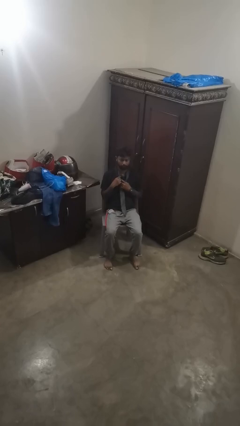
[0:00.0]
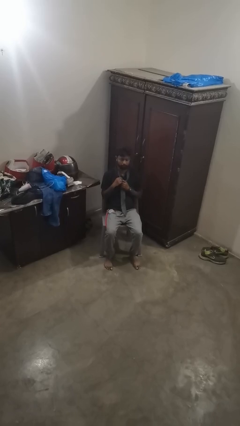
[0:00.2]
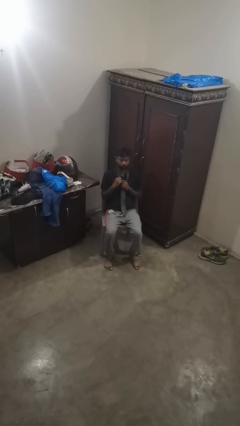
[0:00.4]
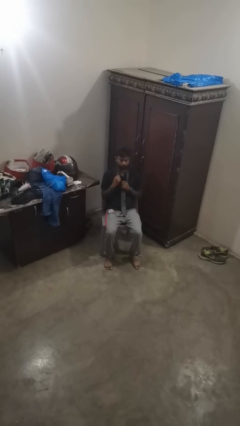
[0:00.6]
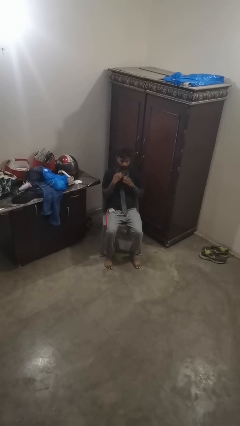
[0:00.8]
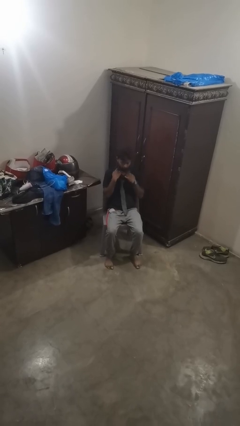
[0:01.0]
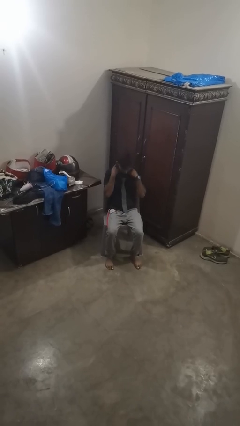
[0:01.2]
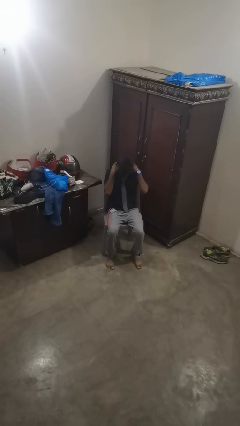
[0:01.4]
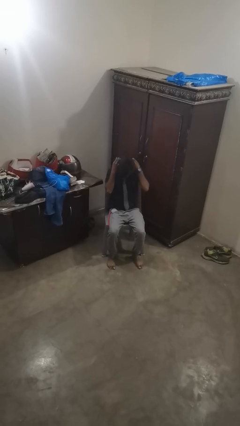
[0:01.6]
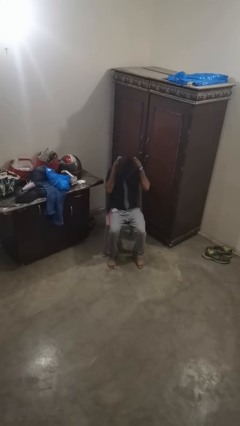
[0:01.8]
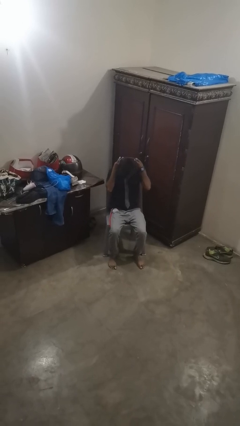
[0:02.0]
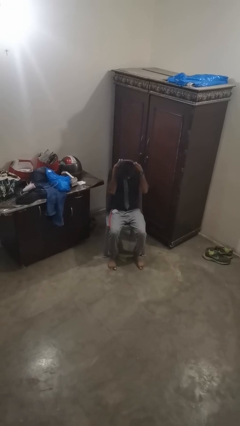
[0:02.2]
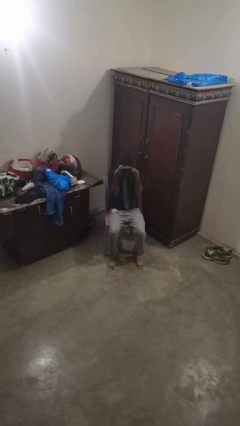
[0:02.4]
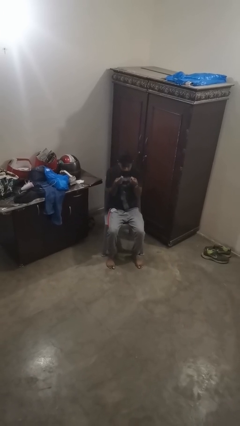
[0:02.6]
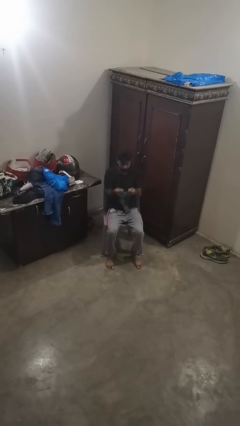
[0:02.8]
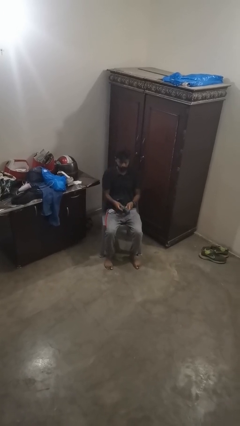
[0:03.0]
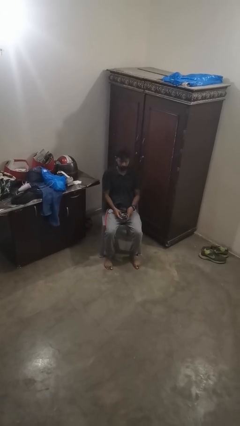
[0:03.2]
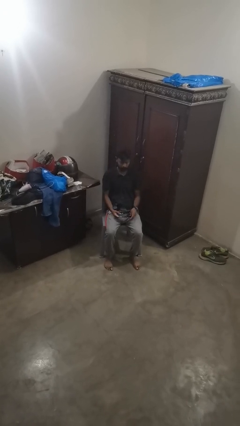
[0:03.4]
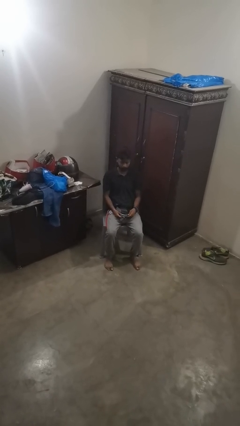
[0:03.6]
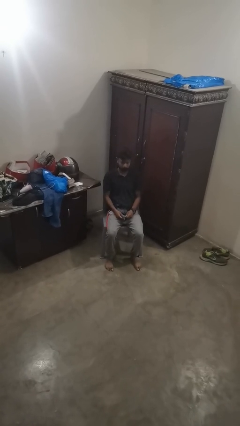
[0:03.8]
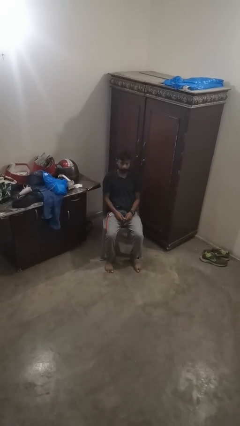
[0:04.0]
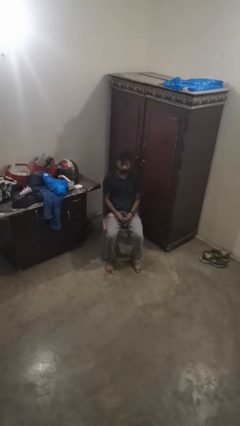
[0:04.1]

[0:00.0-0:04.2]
person takes off necktie

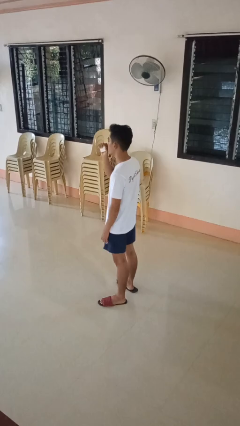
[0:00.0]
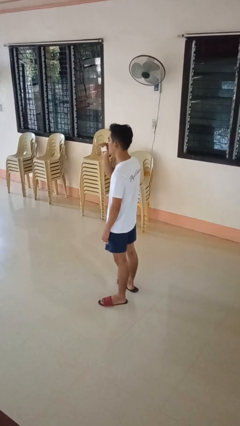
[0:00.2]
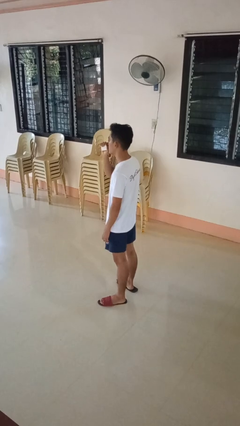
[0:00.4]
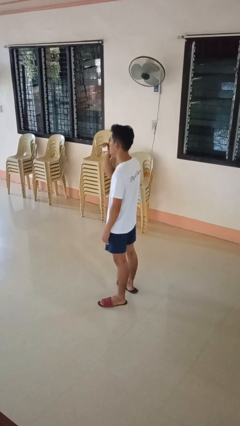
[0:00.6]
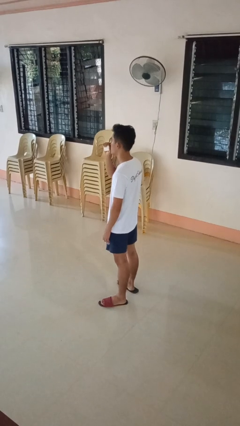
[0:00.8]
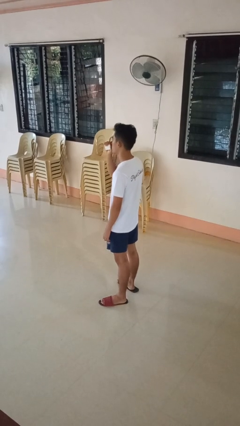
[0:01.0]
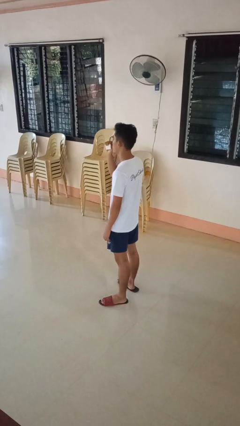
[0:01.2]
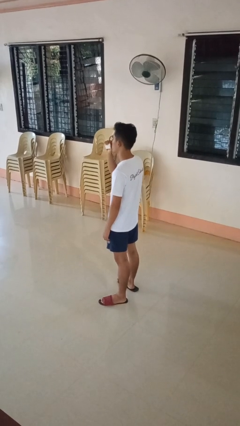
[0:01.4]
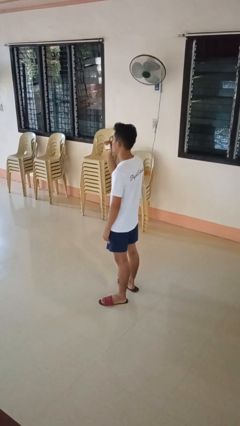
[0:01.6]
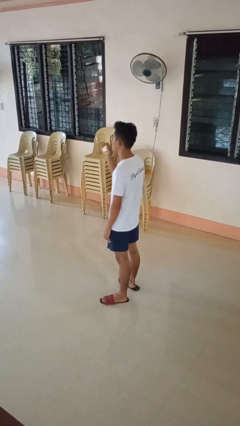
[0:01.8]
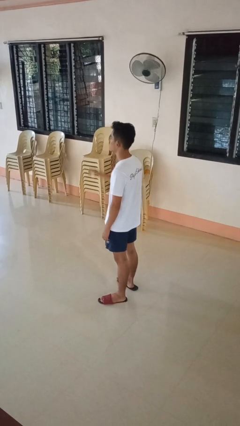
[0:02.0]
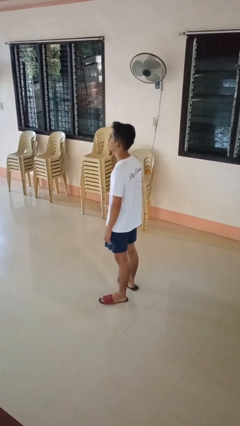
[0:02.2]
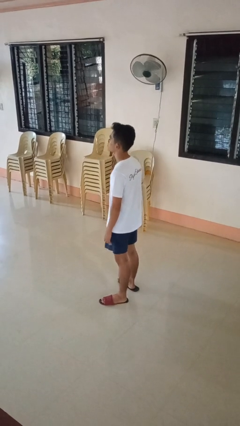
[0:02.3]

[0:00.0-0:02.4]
person vapes

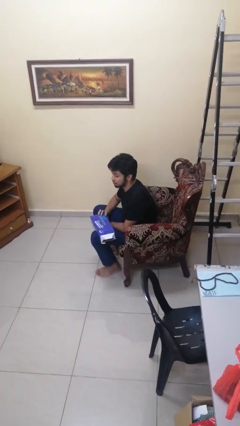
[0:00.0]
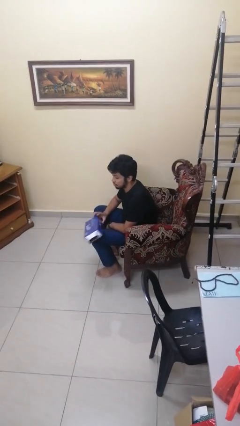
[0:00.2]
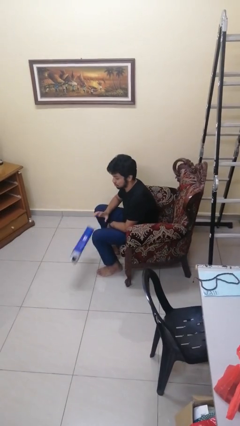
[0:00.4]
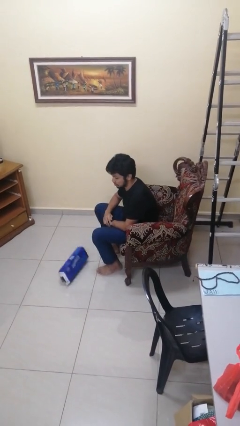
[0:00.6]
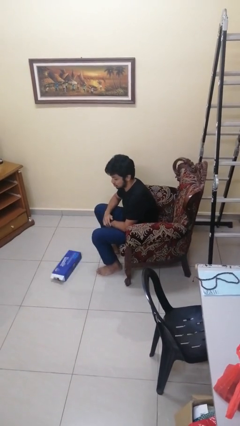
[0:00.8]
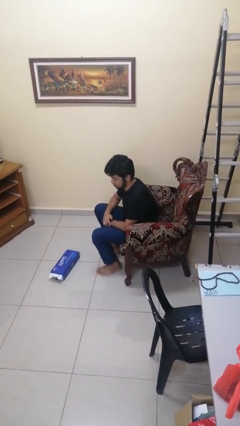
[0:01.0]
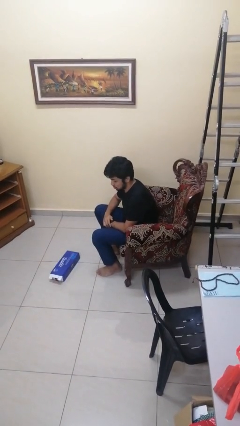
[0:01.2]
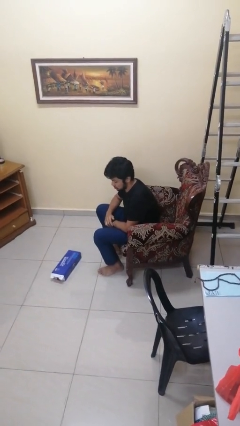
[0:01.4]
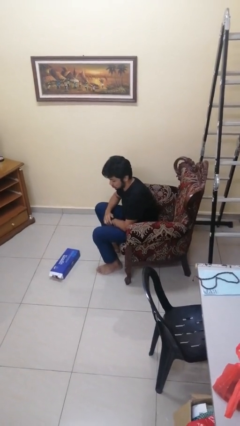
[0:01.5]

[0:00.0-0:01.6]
person drops object

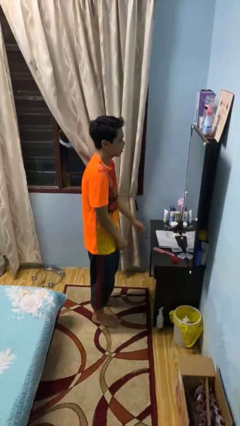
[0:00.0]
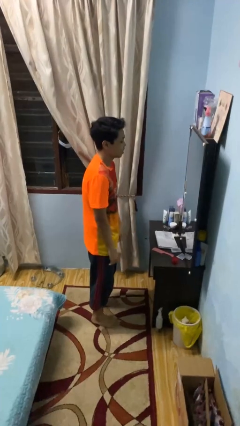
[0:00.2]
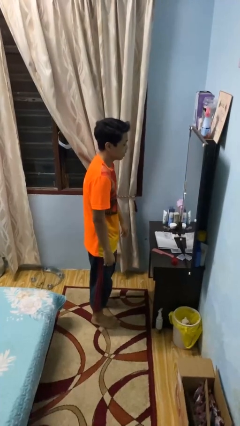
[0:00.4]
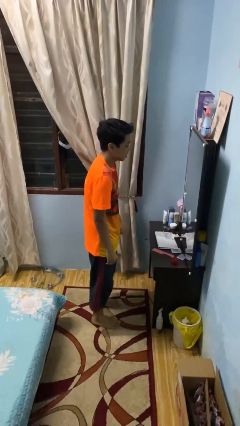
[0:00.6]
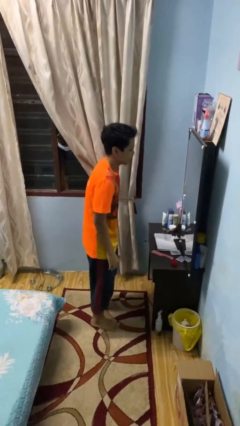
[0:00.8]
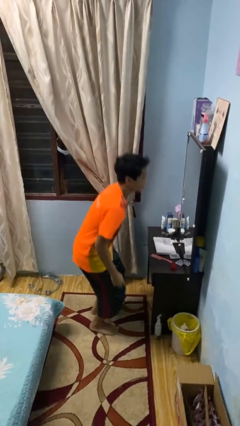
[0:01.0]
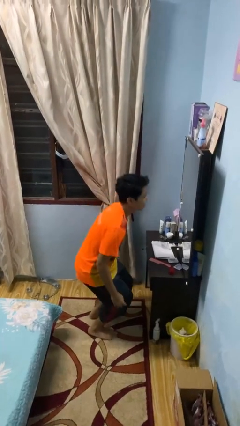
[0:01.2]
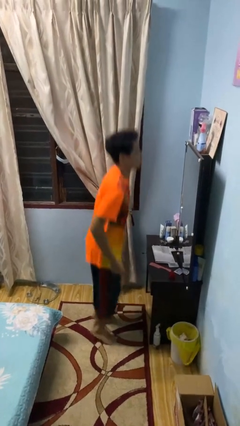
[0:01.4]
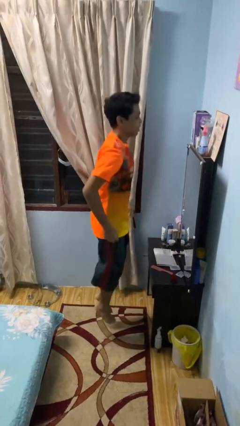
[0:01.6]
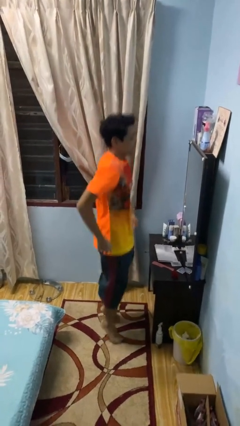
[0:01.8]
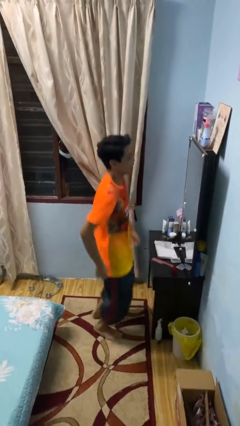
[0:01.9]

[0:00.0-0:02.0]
person jumps

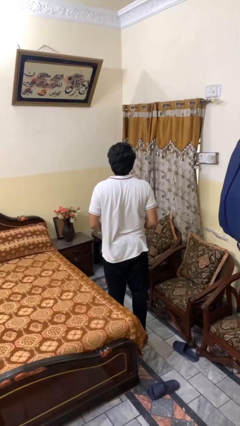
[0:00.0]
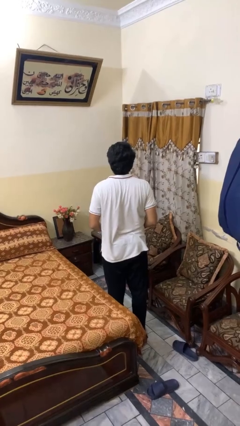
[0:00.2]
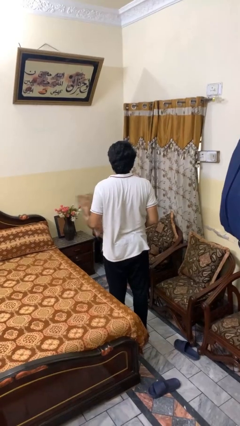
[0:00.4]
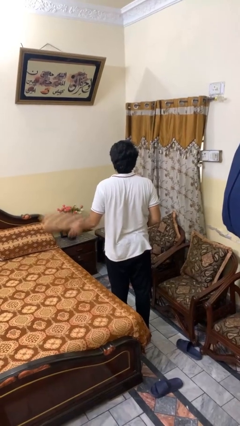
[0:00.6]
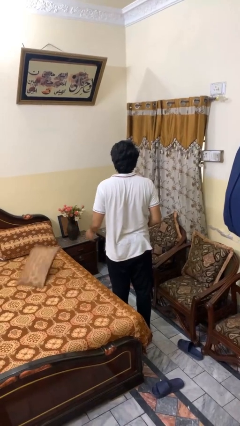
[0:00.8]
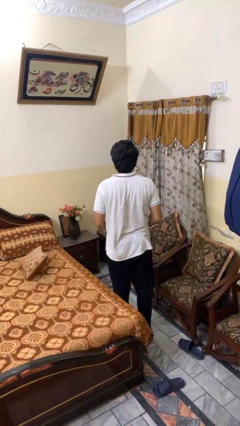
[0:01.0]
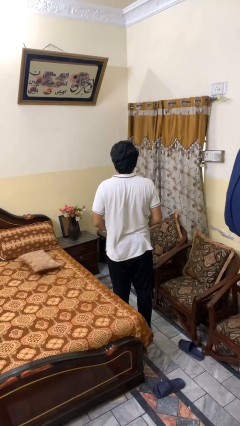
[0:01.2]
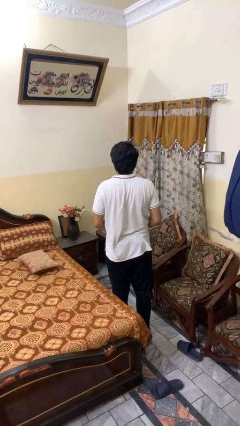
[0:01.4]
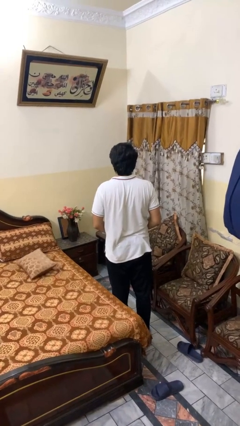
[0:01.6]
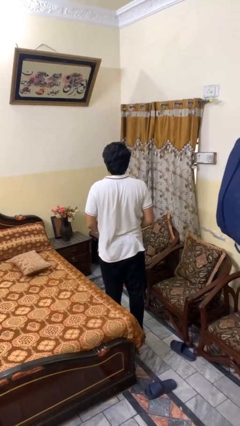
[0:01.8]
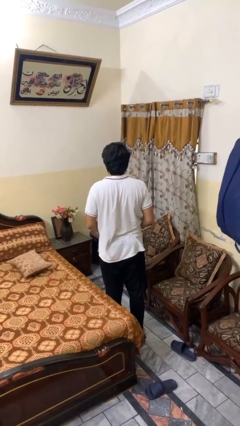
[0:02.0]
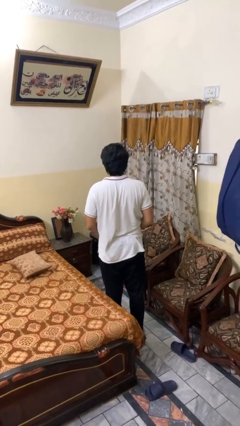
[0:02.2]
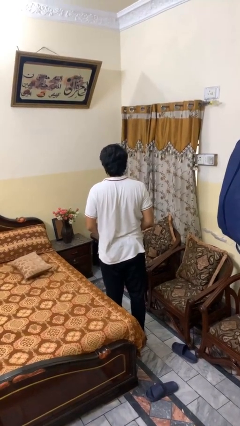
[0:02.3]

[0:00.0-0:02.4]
person throws object on bed

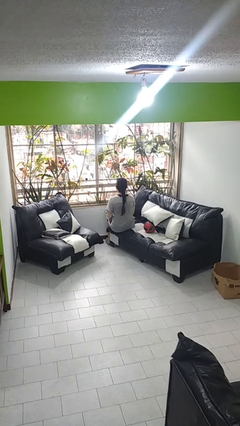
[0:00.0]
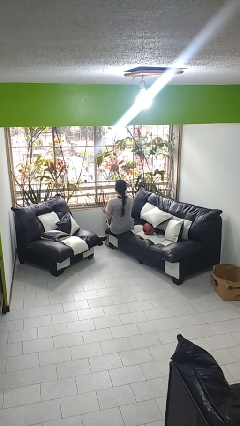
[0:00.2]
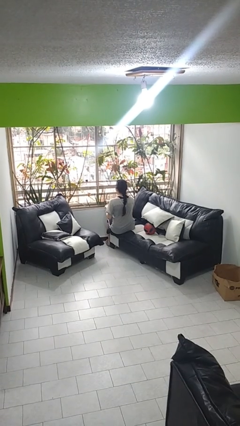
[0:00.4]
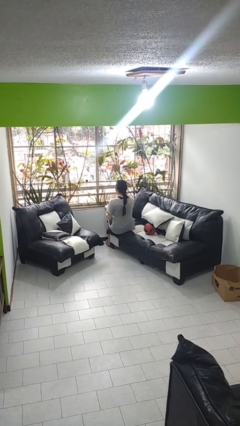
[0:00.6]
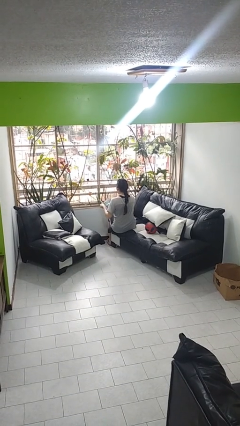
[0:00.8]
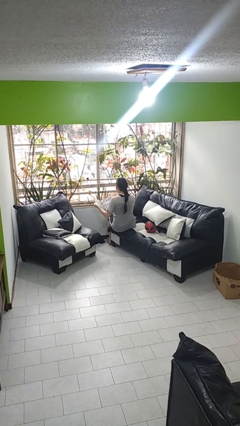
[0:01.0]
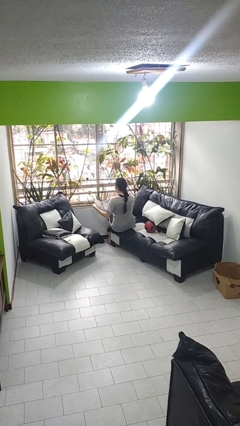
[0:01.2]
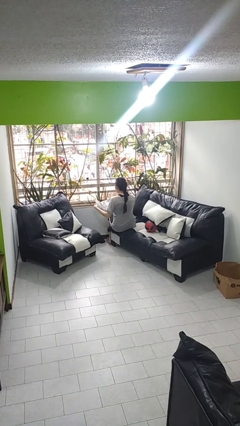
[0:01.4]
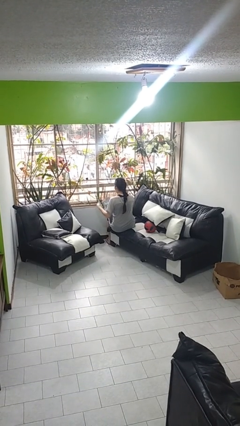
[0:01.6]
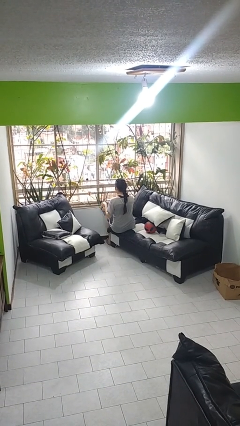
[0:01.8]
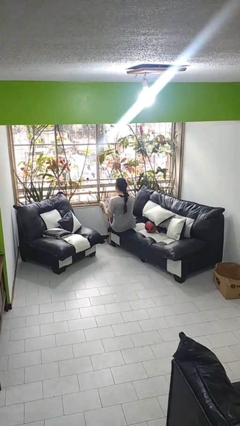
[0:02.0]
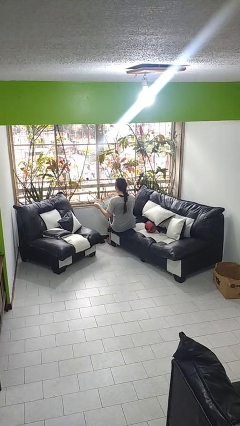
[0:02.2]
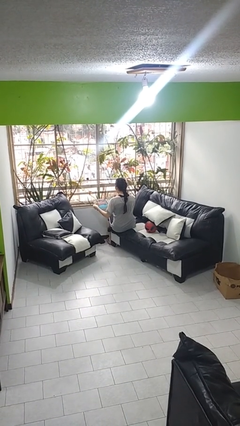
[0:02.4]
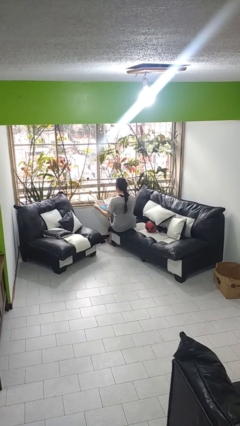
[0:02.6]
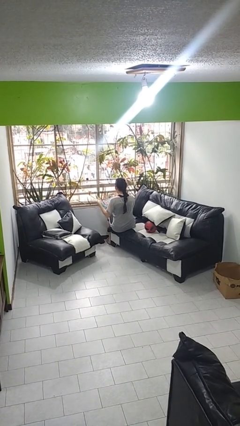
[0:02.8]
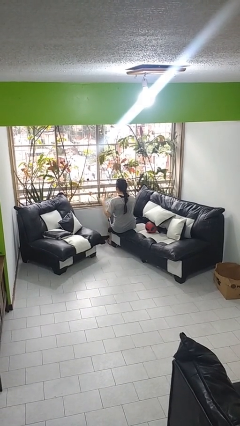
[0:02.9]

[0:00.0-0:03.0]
person reads magazine

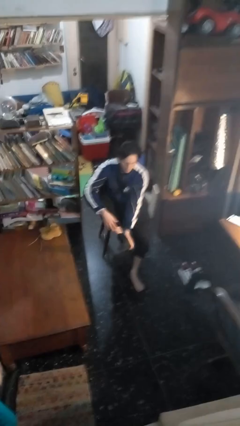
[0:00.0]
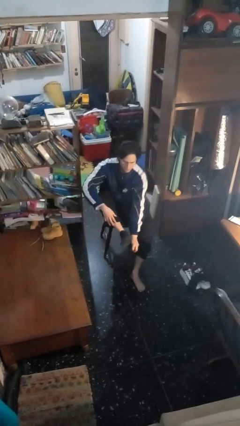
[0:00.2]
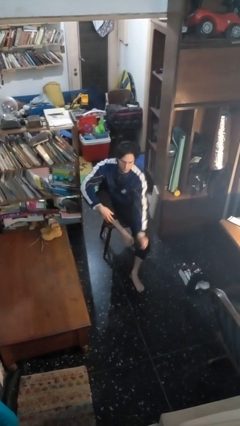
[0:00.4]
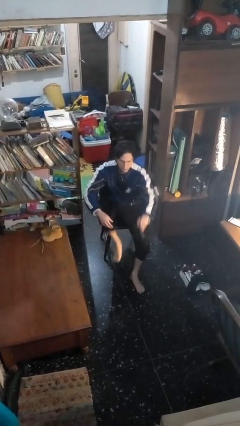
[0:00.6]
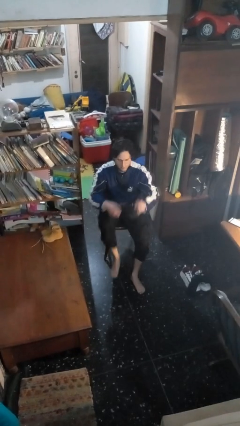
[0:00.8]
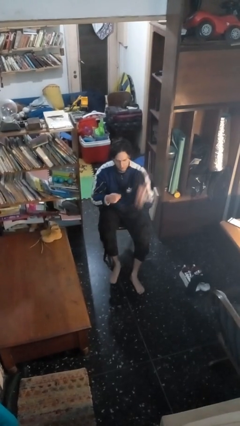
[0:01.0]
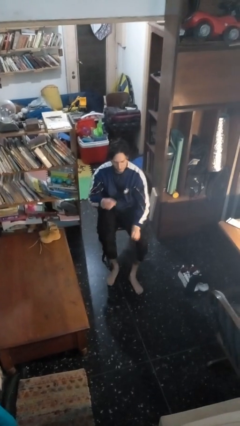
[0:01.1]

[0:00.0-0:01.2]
person takes off socks

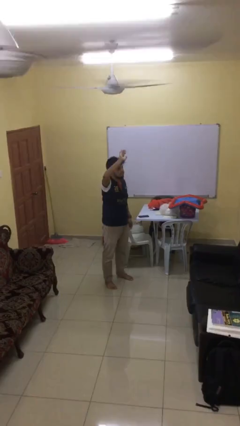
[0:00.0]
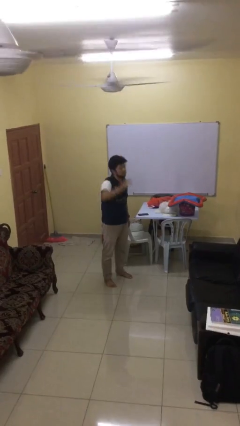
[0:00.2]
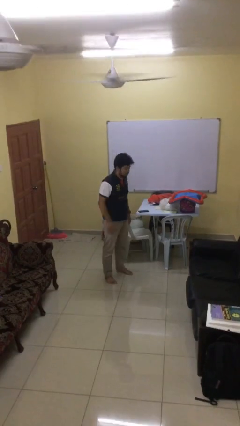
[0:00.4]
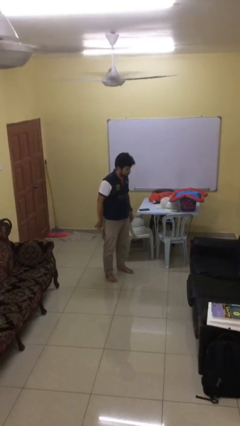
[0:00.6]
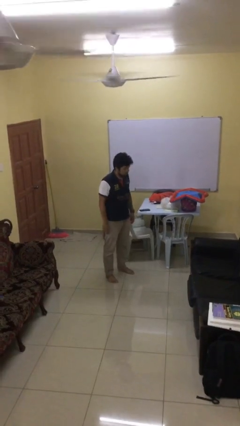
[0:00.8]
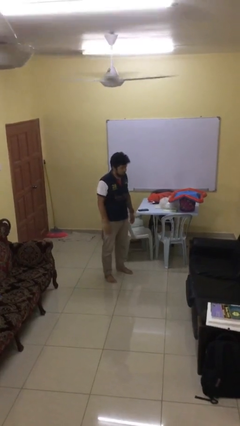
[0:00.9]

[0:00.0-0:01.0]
person gestures lower hand
